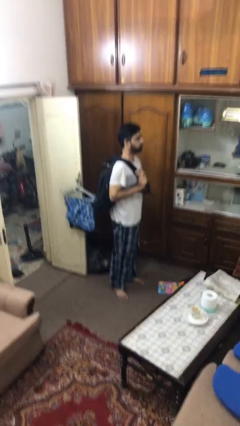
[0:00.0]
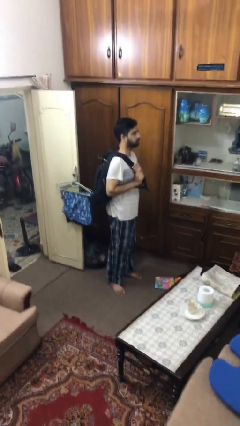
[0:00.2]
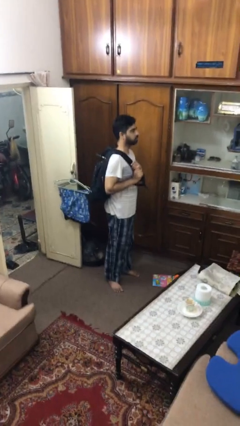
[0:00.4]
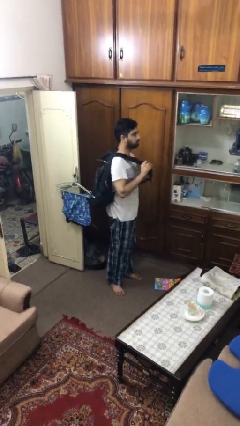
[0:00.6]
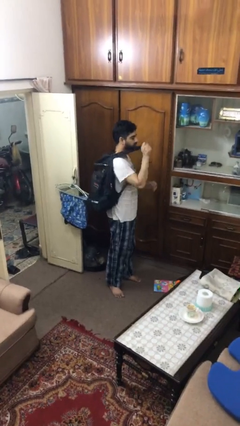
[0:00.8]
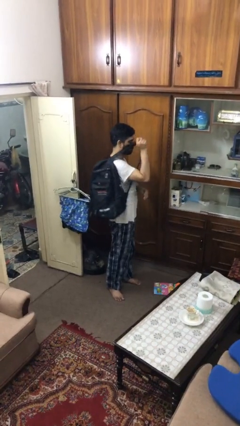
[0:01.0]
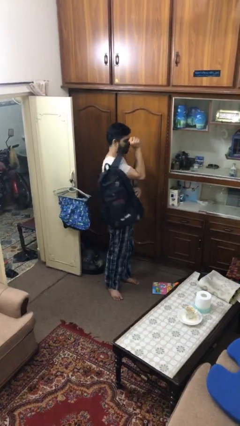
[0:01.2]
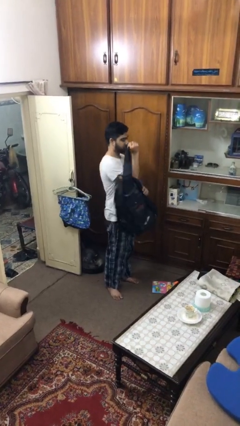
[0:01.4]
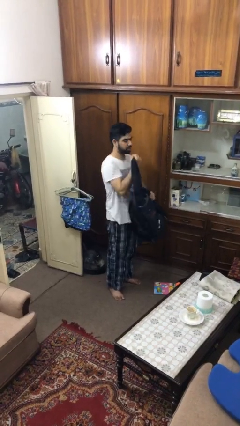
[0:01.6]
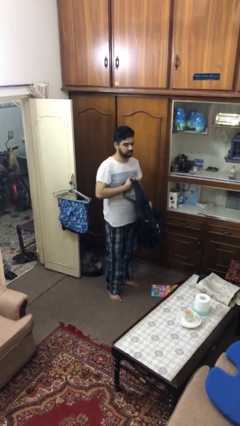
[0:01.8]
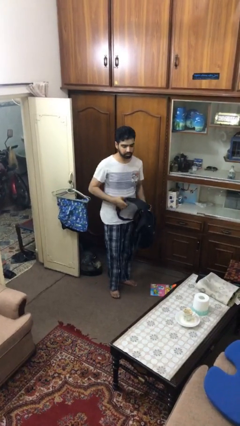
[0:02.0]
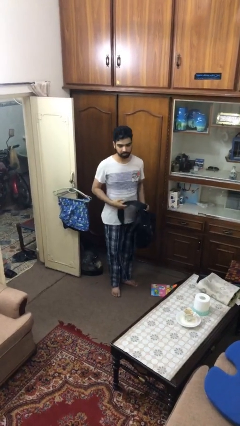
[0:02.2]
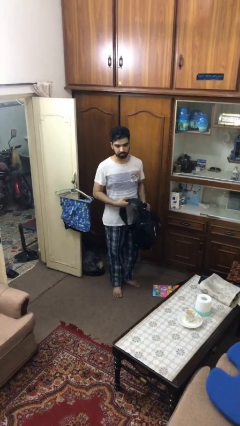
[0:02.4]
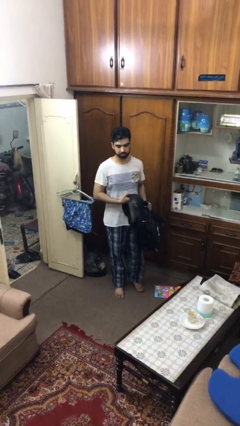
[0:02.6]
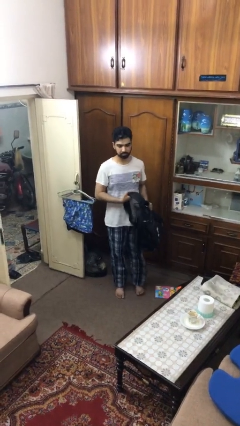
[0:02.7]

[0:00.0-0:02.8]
person takes off backpack

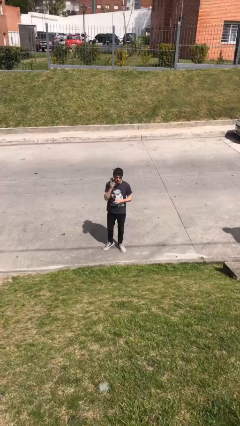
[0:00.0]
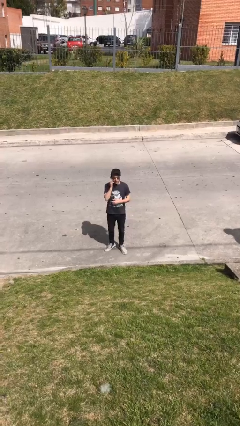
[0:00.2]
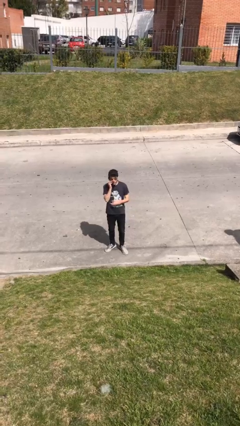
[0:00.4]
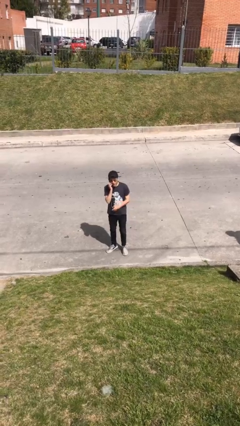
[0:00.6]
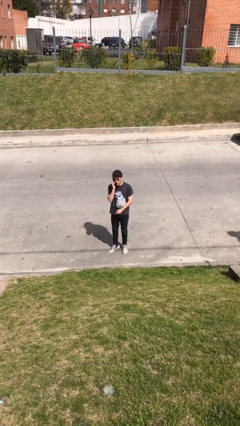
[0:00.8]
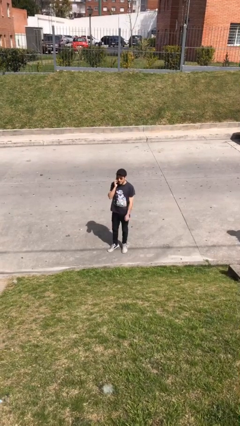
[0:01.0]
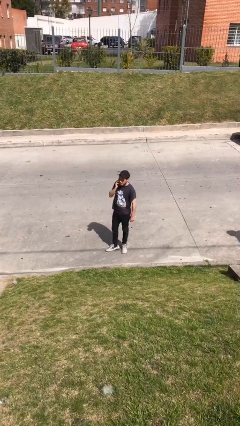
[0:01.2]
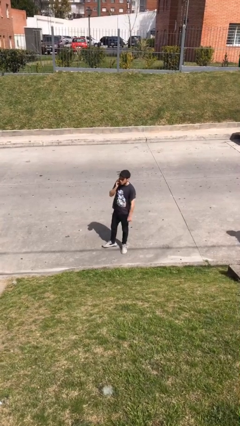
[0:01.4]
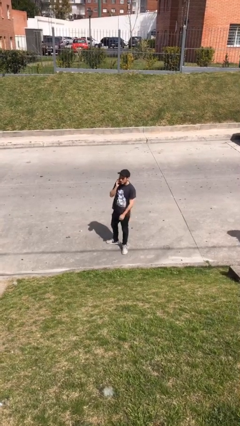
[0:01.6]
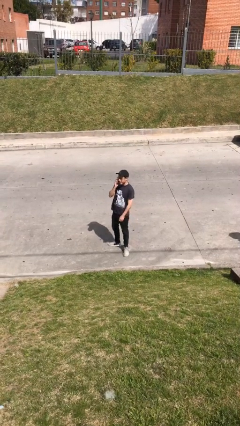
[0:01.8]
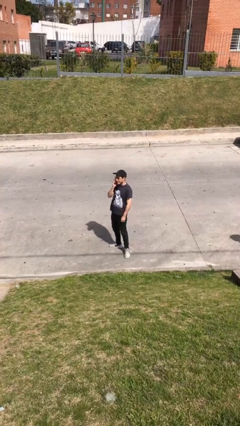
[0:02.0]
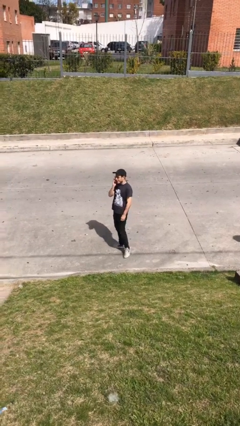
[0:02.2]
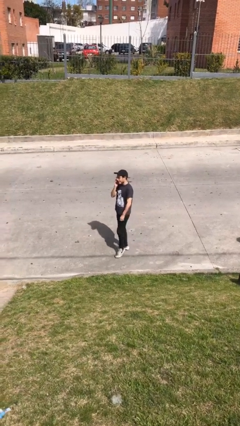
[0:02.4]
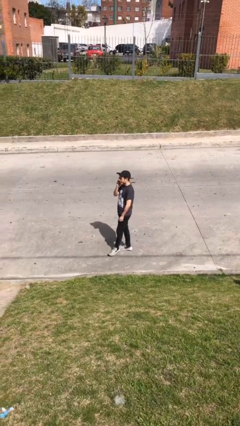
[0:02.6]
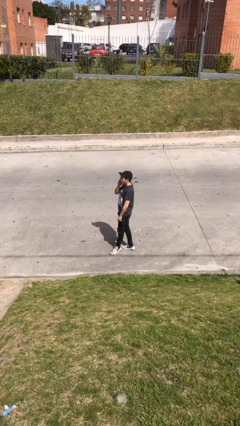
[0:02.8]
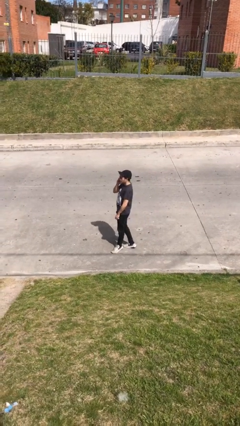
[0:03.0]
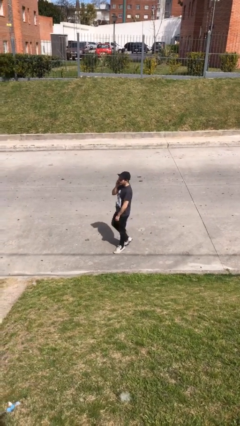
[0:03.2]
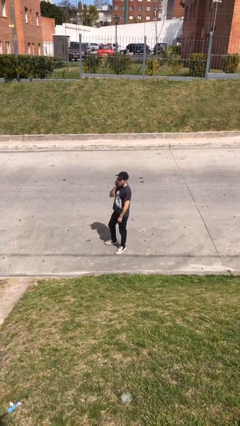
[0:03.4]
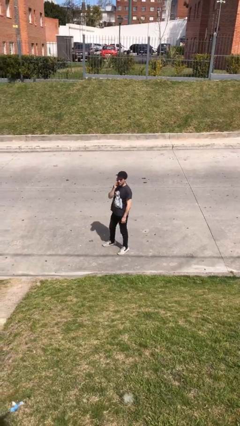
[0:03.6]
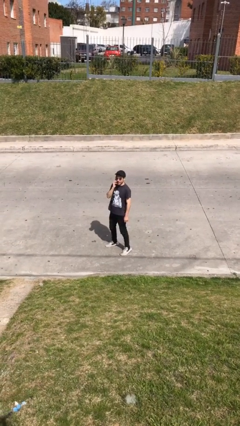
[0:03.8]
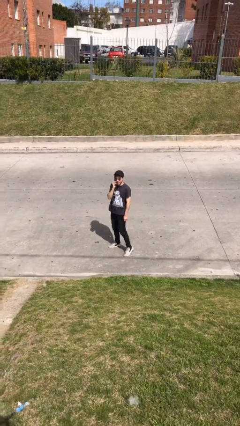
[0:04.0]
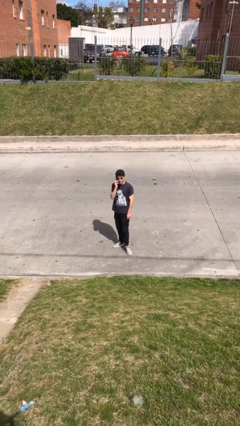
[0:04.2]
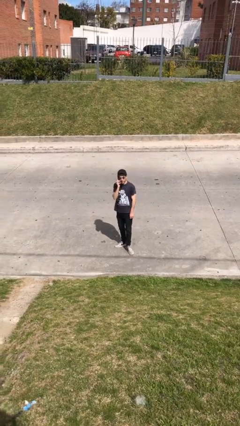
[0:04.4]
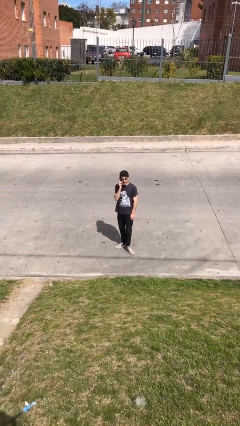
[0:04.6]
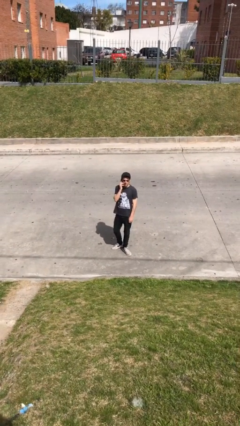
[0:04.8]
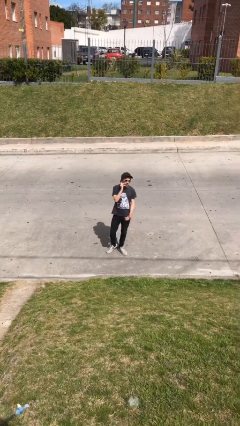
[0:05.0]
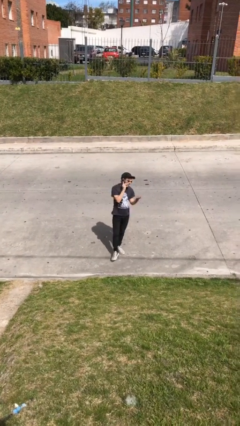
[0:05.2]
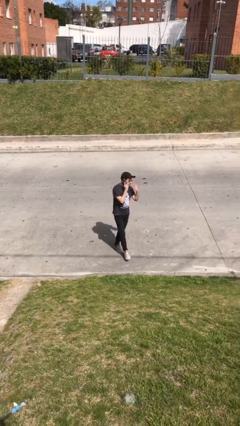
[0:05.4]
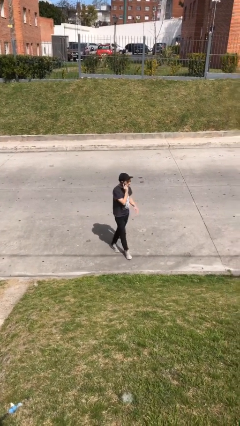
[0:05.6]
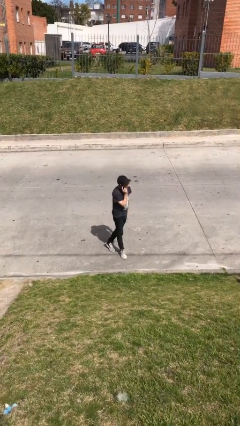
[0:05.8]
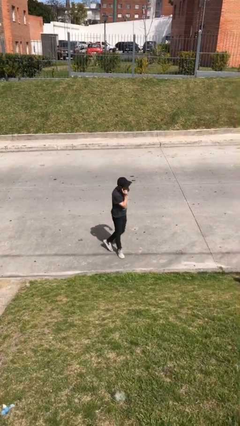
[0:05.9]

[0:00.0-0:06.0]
person talks on phone

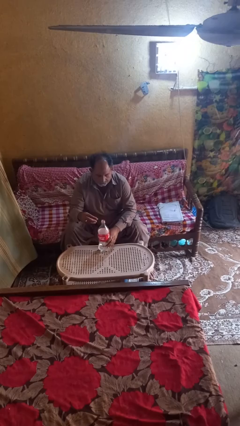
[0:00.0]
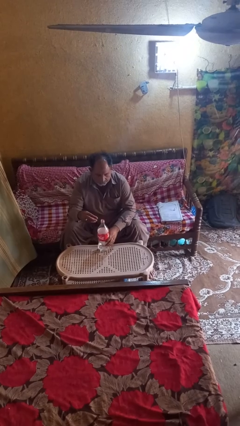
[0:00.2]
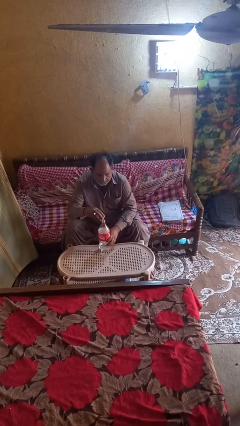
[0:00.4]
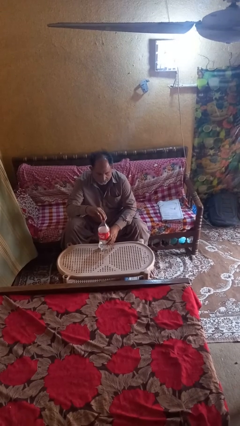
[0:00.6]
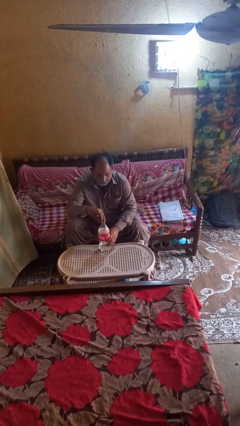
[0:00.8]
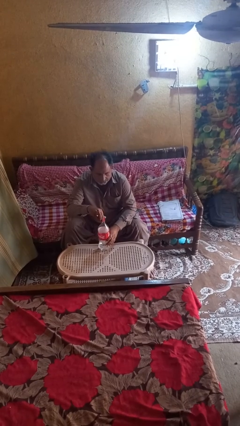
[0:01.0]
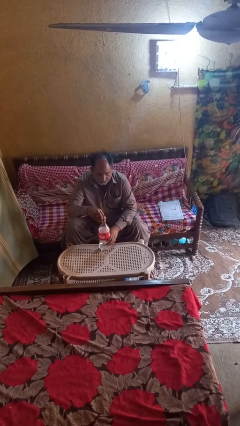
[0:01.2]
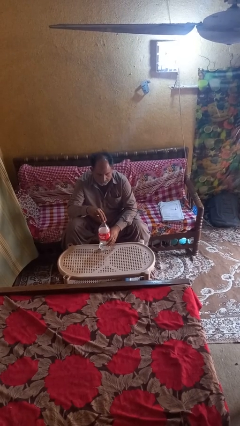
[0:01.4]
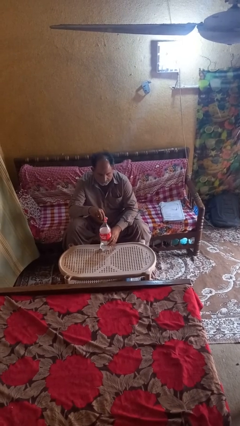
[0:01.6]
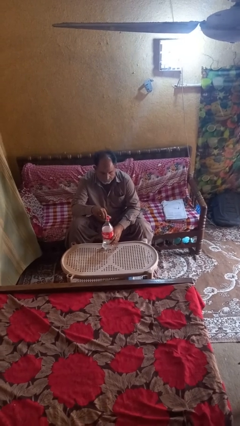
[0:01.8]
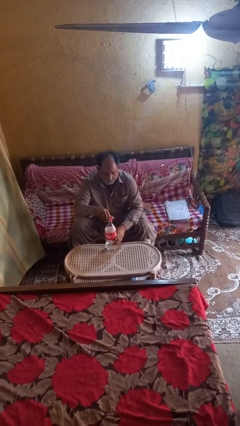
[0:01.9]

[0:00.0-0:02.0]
person screws lid to bottle

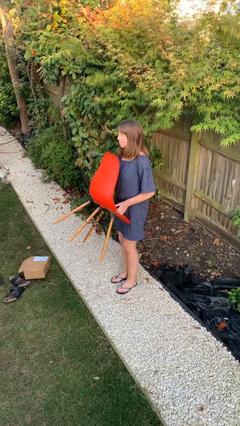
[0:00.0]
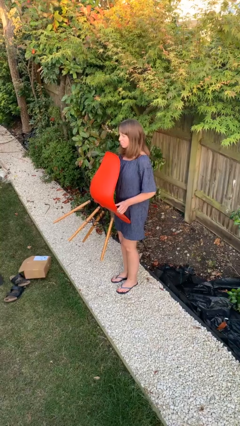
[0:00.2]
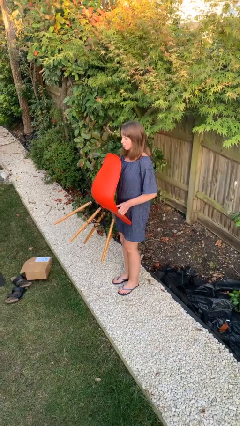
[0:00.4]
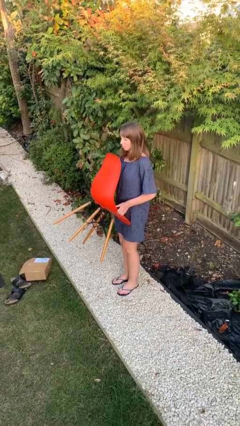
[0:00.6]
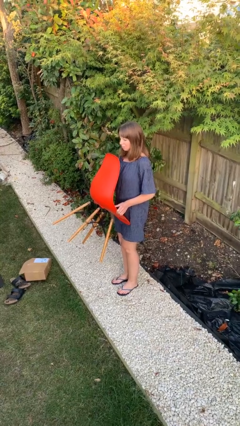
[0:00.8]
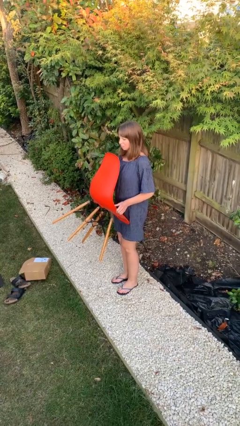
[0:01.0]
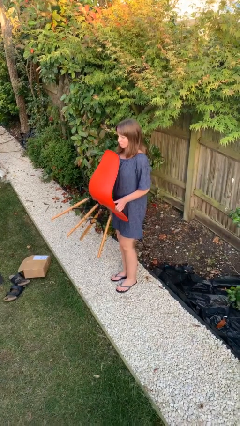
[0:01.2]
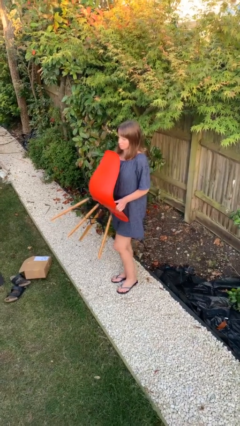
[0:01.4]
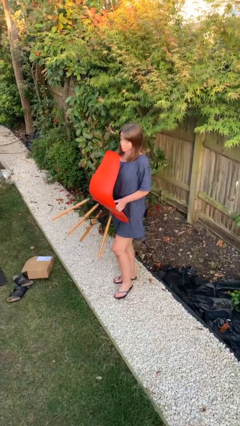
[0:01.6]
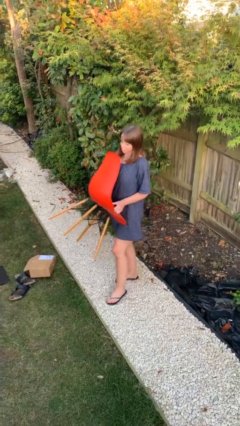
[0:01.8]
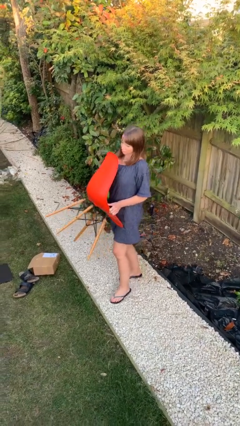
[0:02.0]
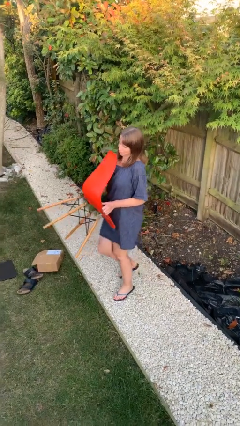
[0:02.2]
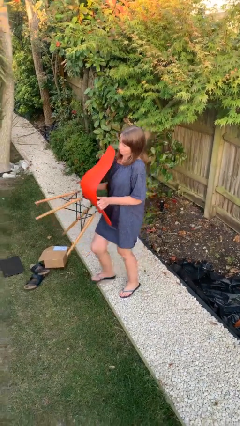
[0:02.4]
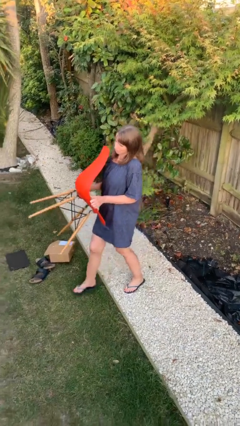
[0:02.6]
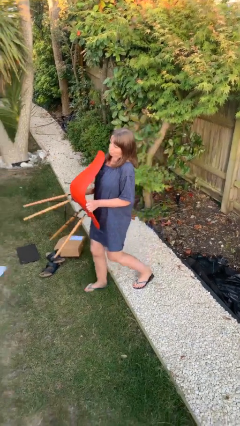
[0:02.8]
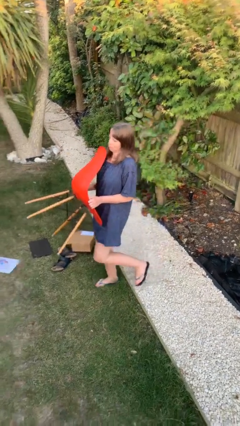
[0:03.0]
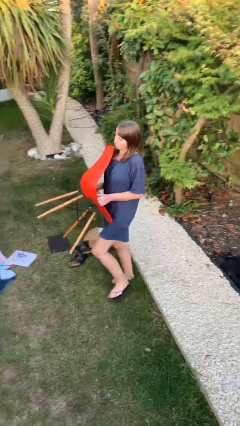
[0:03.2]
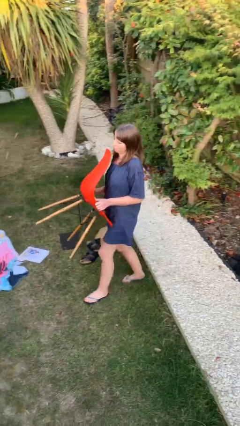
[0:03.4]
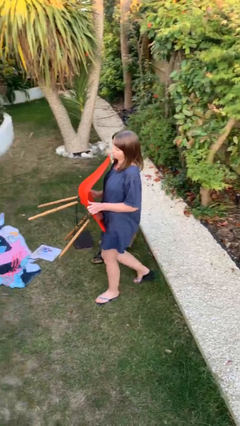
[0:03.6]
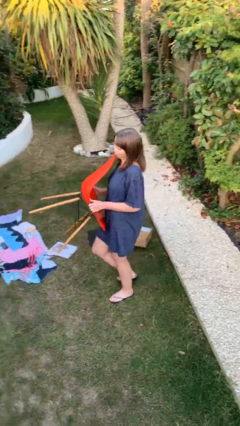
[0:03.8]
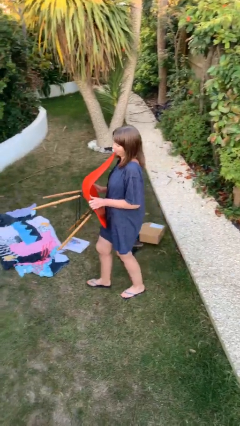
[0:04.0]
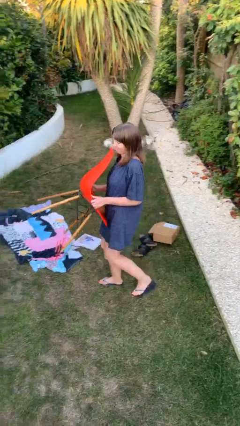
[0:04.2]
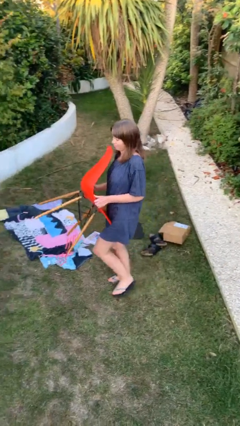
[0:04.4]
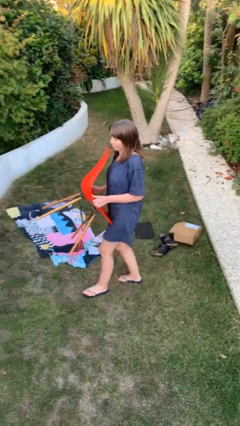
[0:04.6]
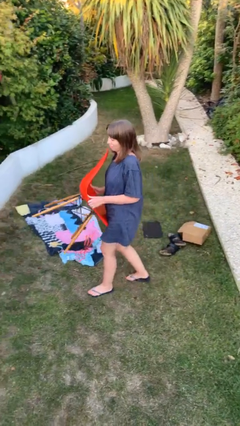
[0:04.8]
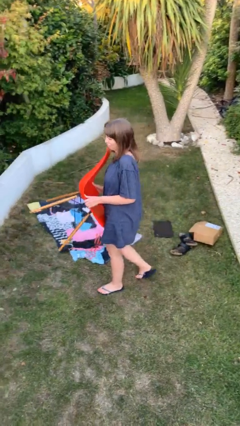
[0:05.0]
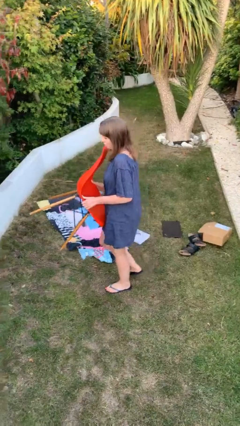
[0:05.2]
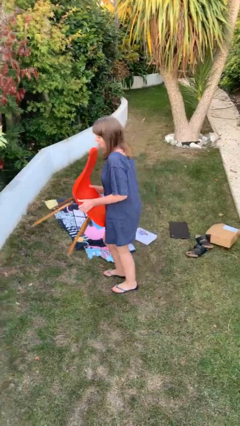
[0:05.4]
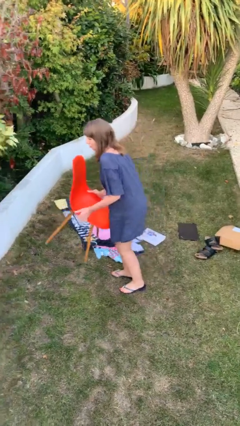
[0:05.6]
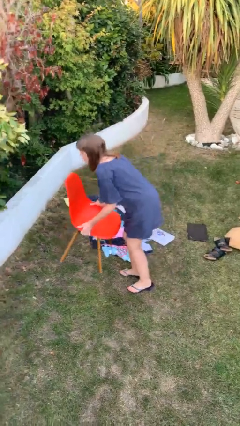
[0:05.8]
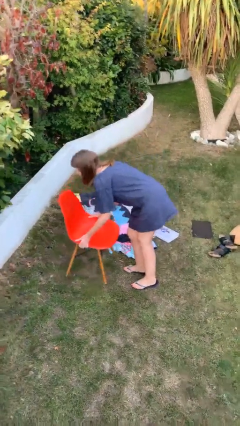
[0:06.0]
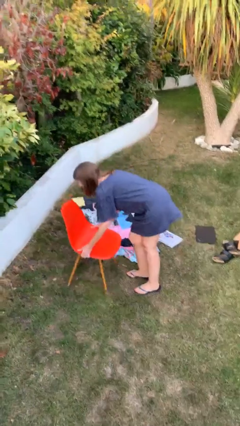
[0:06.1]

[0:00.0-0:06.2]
person carries heavy object

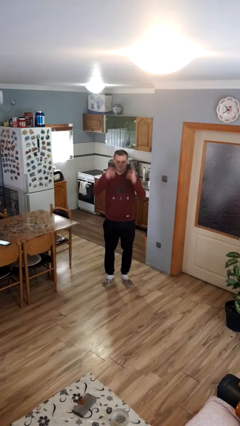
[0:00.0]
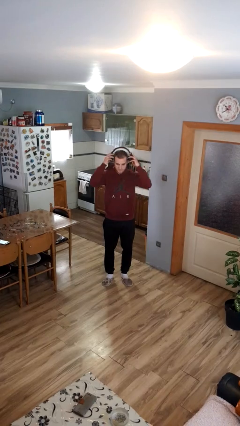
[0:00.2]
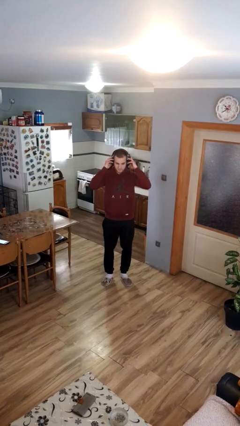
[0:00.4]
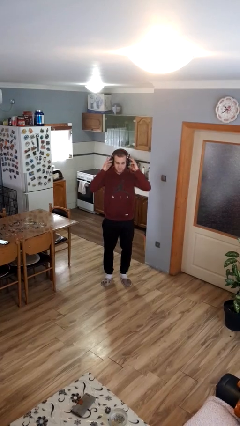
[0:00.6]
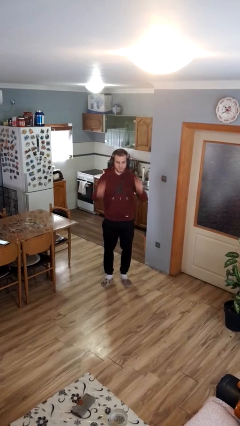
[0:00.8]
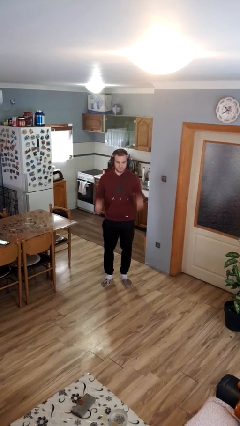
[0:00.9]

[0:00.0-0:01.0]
person puts on headphones
